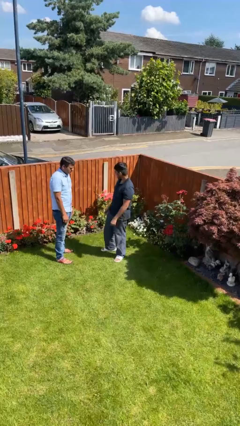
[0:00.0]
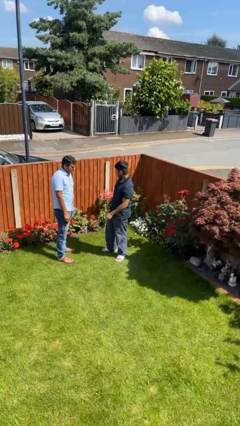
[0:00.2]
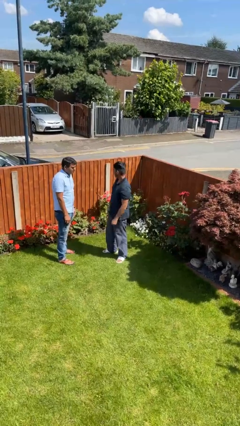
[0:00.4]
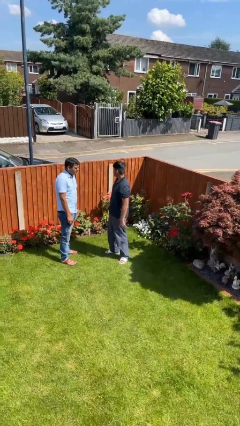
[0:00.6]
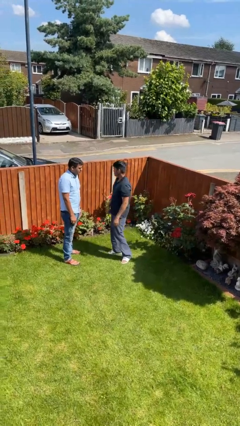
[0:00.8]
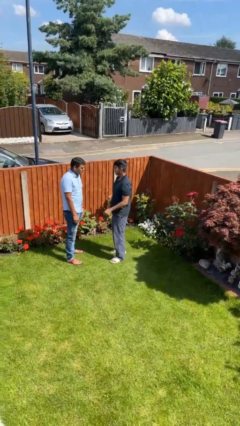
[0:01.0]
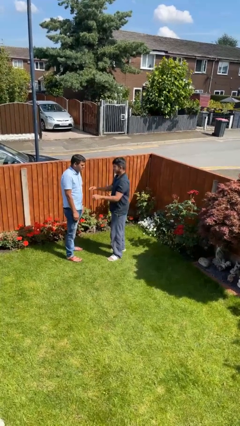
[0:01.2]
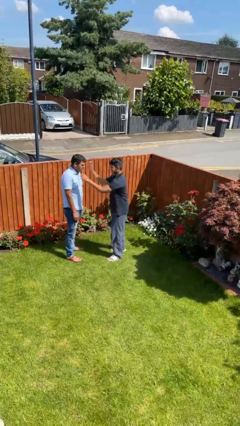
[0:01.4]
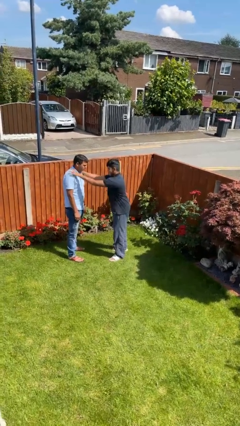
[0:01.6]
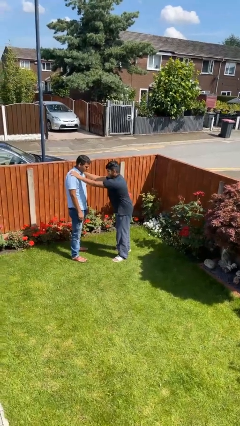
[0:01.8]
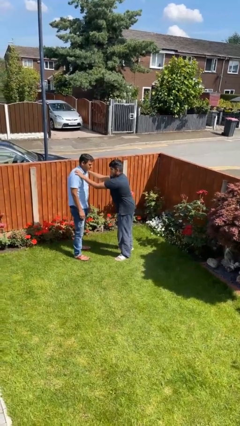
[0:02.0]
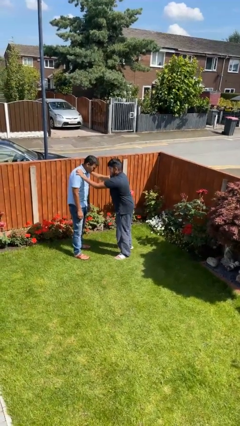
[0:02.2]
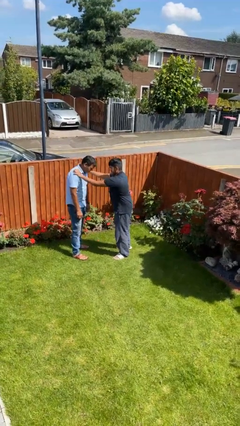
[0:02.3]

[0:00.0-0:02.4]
person pounds shoulders of person

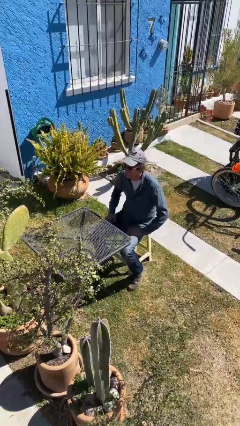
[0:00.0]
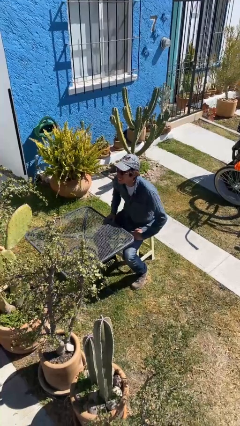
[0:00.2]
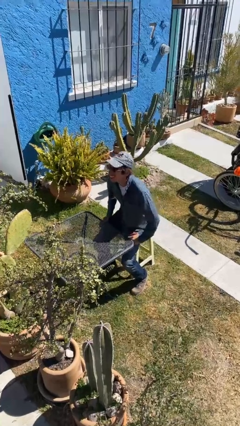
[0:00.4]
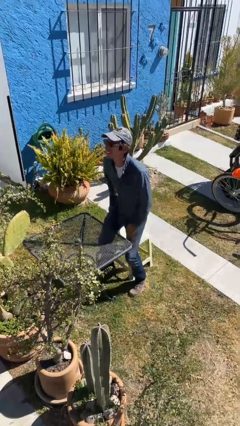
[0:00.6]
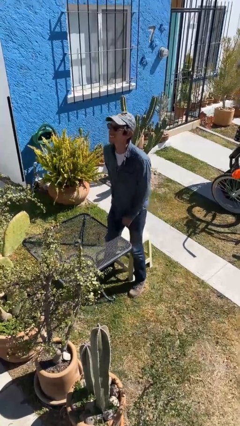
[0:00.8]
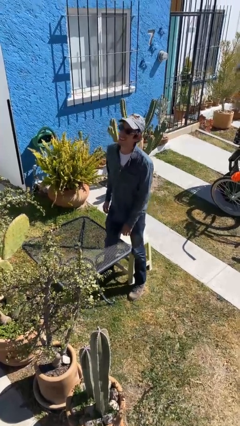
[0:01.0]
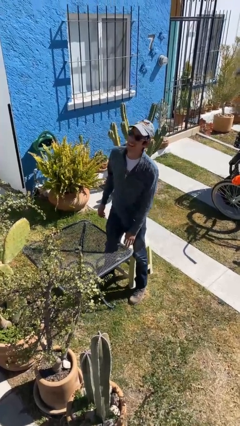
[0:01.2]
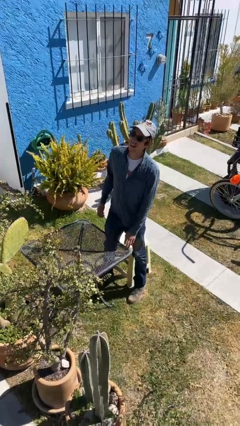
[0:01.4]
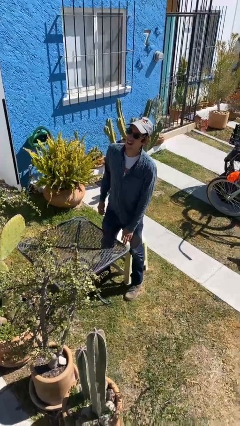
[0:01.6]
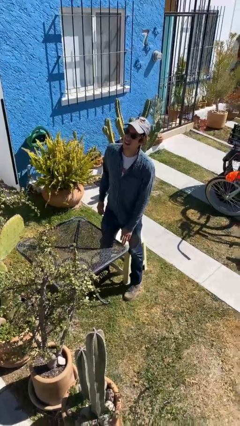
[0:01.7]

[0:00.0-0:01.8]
person stands up

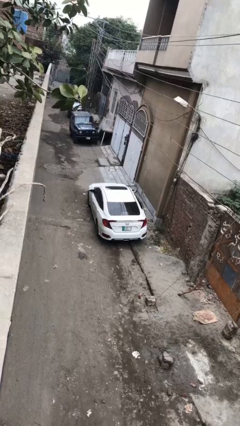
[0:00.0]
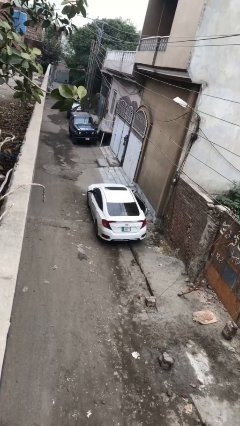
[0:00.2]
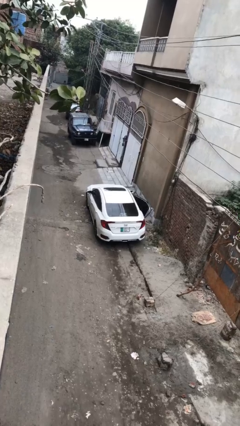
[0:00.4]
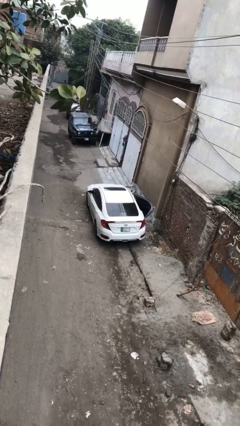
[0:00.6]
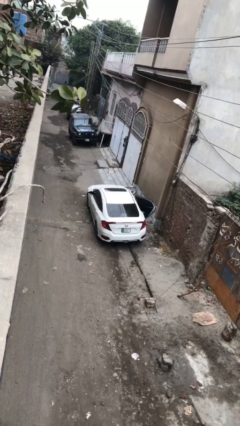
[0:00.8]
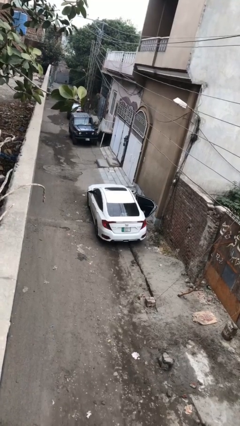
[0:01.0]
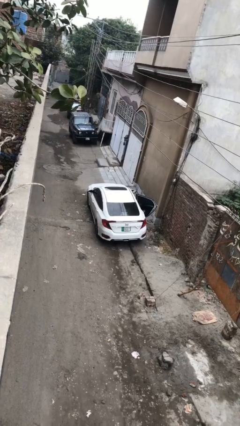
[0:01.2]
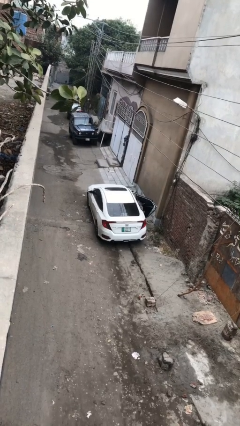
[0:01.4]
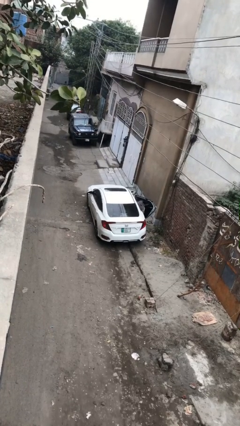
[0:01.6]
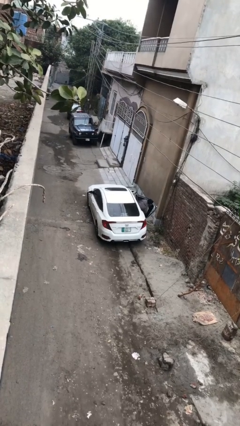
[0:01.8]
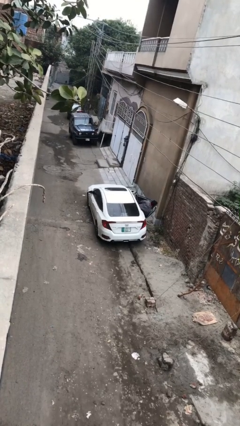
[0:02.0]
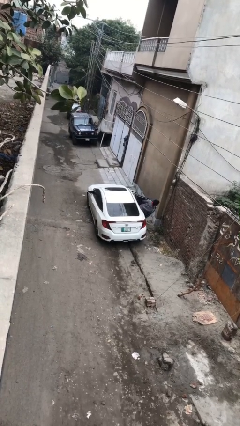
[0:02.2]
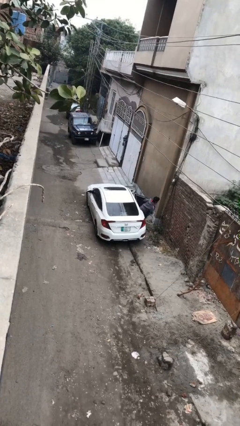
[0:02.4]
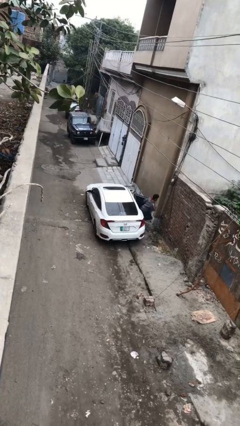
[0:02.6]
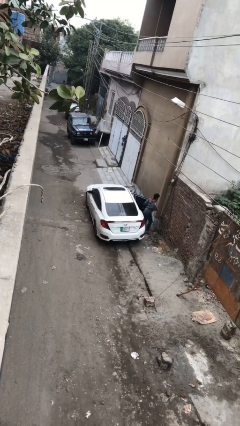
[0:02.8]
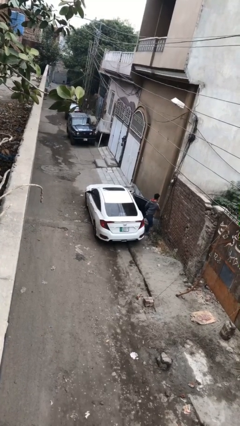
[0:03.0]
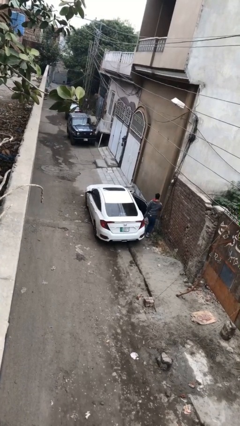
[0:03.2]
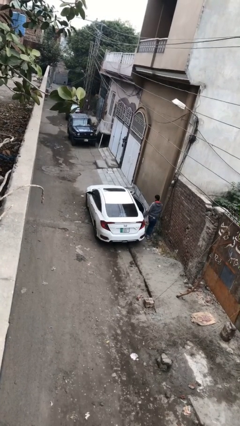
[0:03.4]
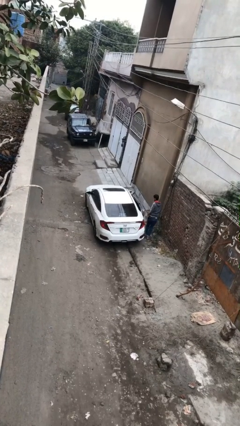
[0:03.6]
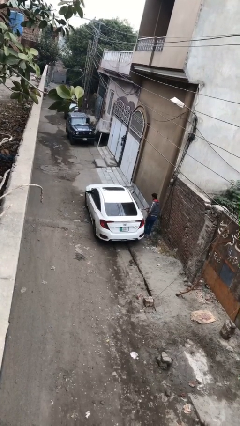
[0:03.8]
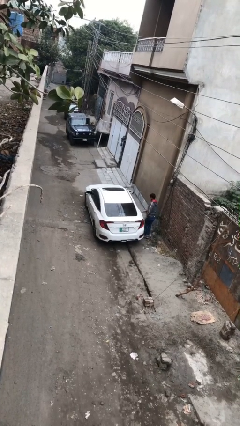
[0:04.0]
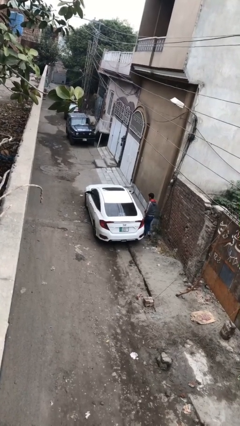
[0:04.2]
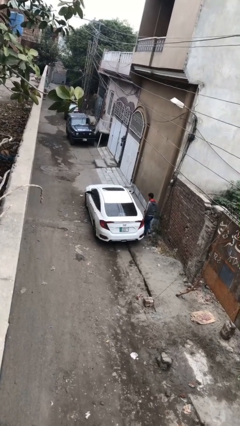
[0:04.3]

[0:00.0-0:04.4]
car drops off person

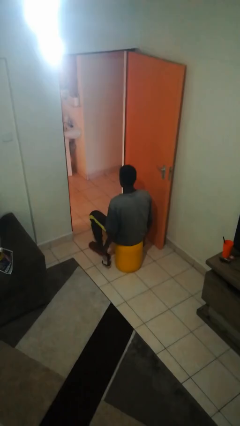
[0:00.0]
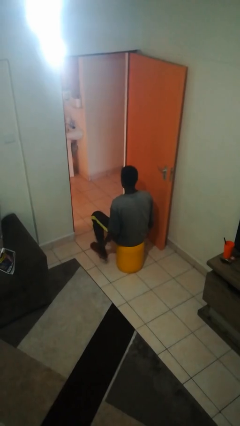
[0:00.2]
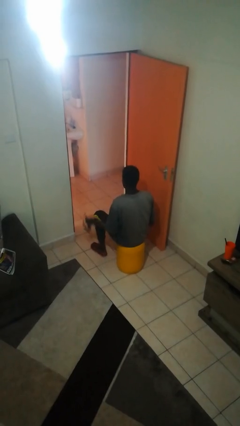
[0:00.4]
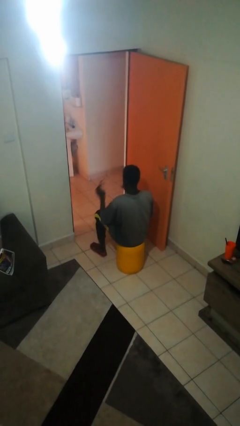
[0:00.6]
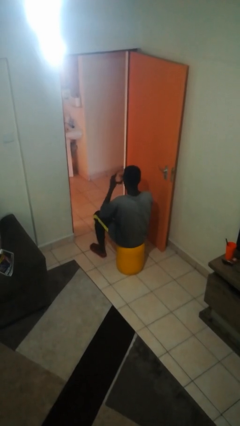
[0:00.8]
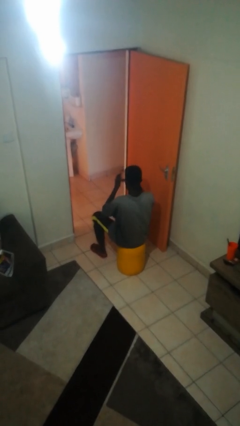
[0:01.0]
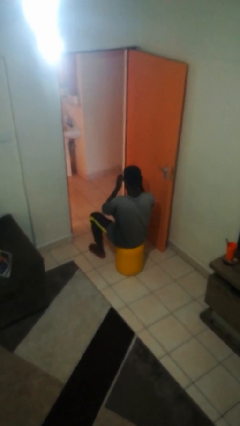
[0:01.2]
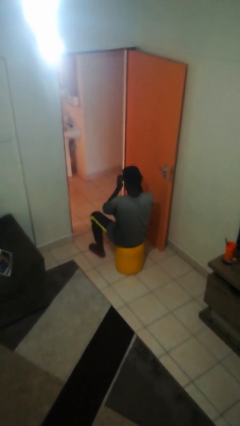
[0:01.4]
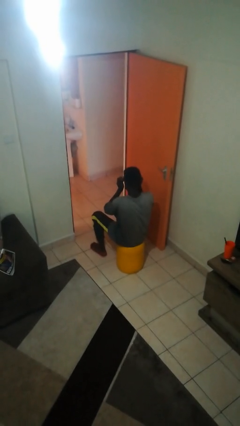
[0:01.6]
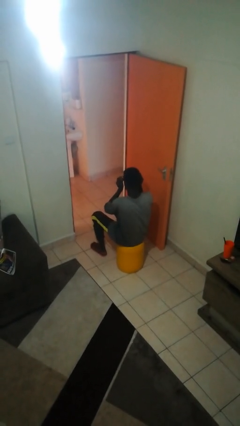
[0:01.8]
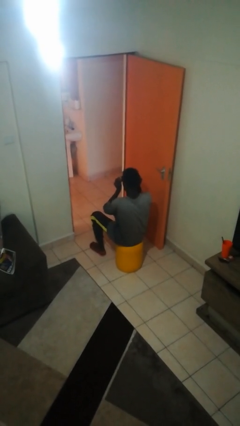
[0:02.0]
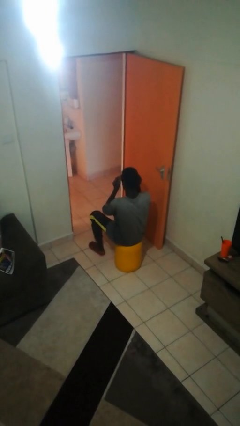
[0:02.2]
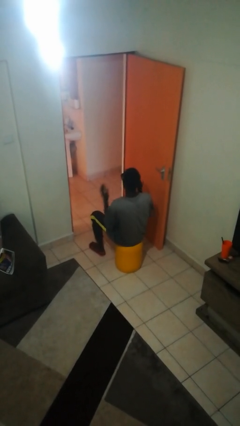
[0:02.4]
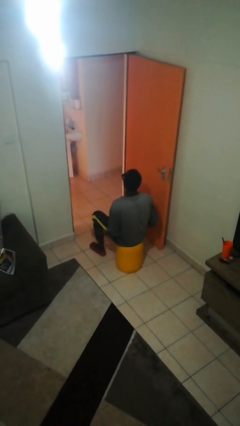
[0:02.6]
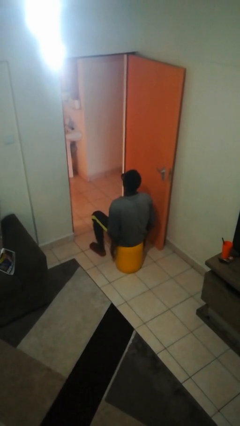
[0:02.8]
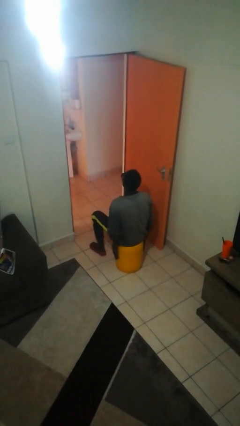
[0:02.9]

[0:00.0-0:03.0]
person puts on sunglasses

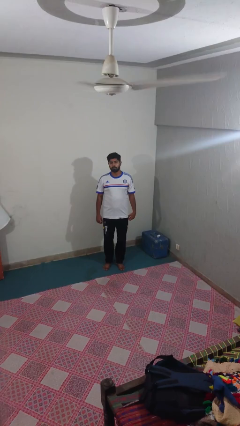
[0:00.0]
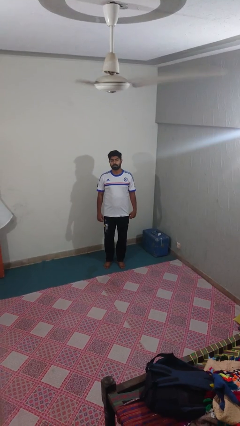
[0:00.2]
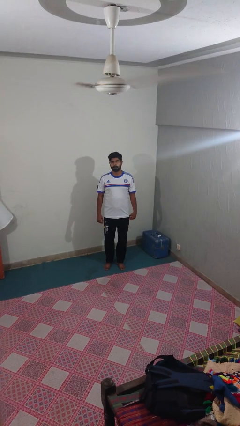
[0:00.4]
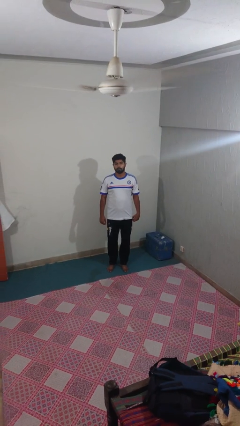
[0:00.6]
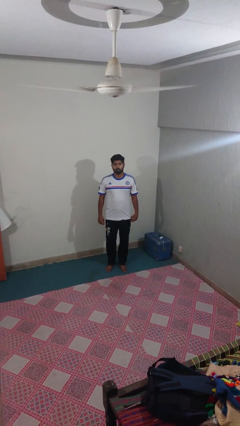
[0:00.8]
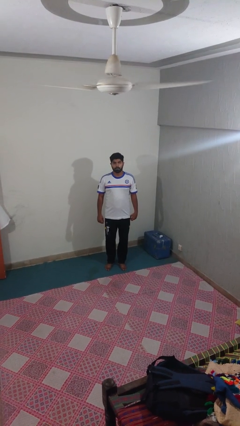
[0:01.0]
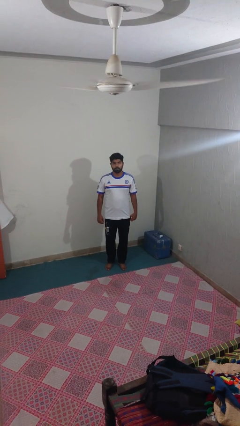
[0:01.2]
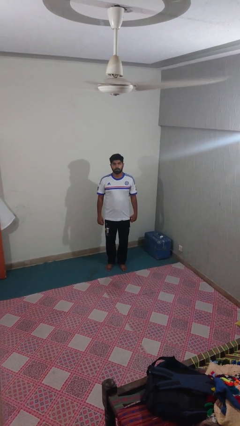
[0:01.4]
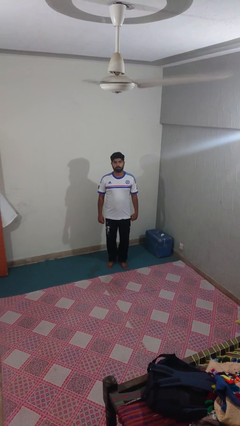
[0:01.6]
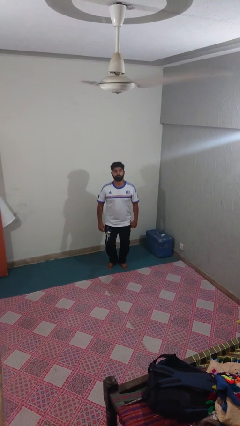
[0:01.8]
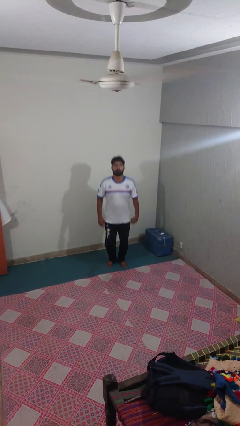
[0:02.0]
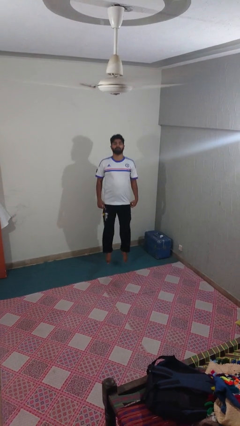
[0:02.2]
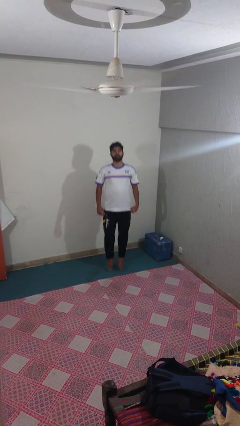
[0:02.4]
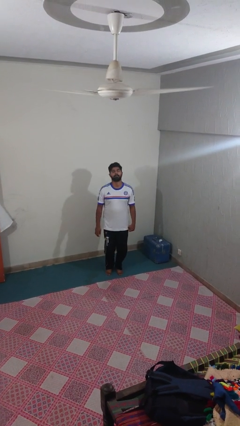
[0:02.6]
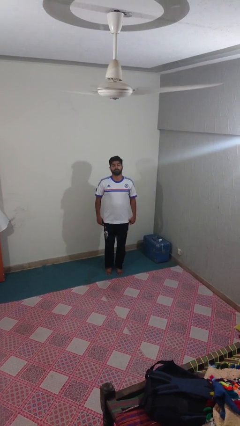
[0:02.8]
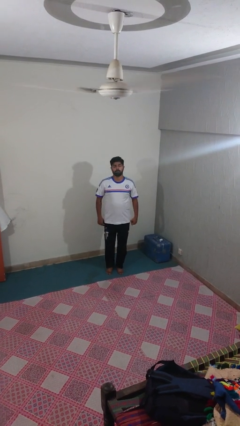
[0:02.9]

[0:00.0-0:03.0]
person jumps

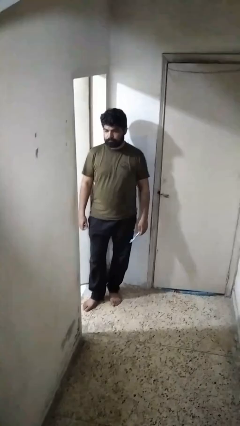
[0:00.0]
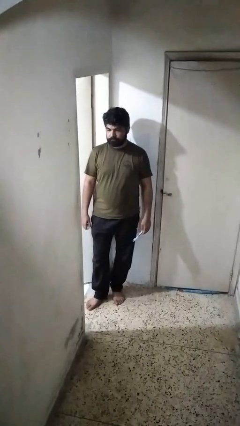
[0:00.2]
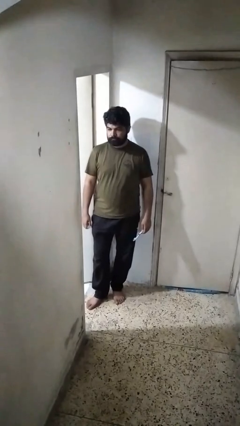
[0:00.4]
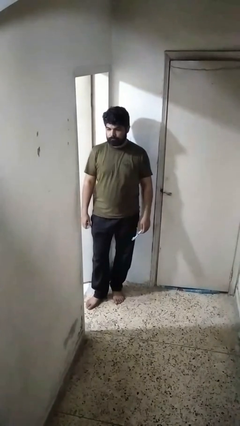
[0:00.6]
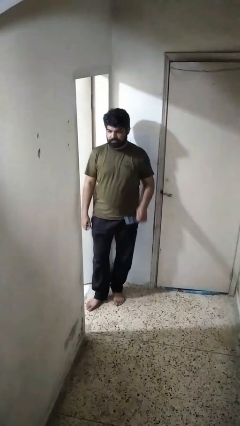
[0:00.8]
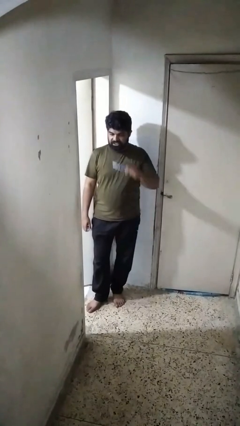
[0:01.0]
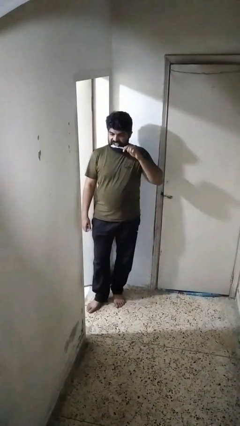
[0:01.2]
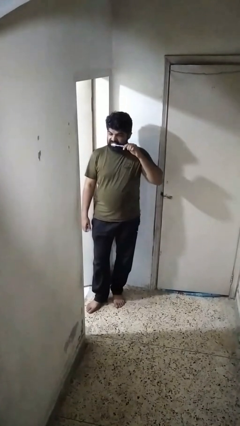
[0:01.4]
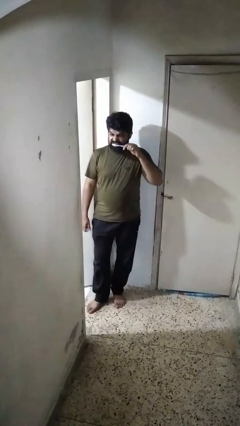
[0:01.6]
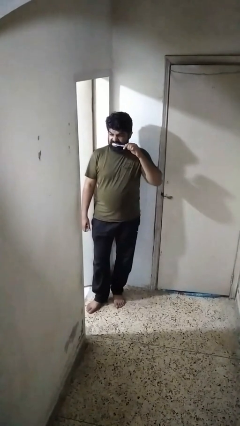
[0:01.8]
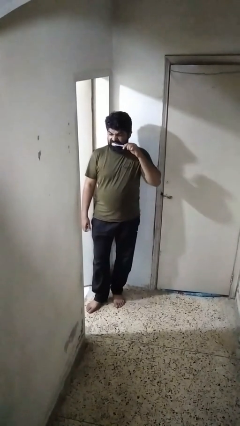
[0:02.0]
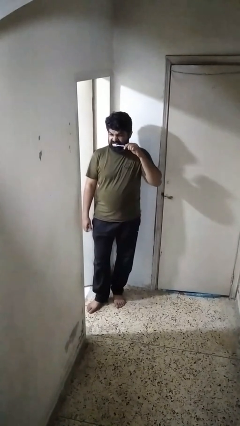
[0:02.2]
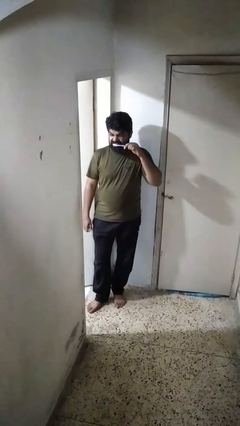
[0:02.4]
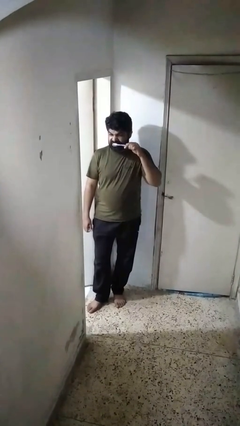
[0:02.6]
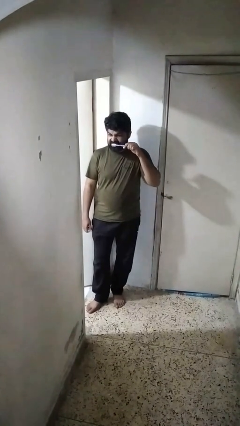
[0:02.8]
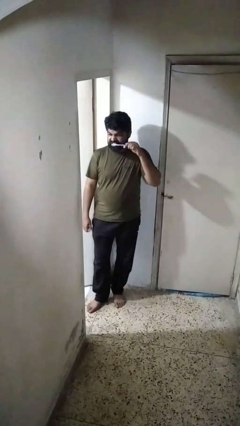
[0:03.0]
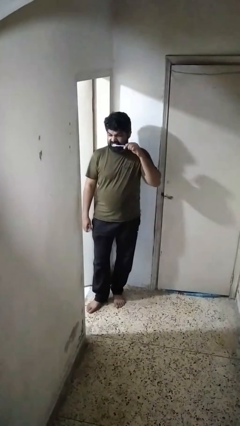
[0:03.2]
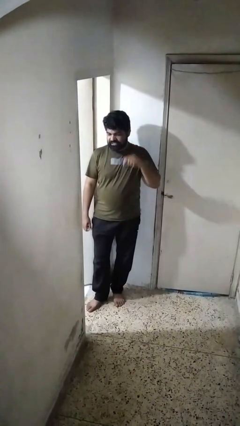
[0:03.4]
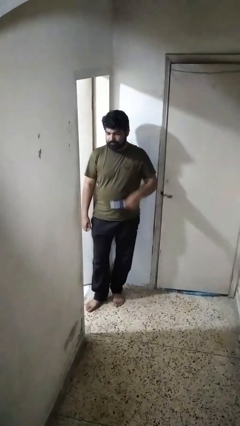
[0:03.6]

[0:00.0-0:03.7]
person brushes teeth
